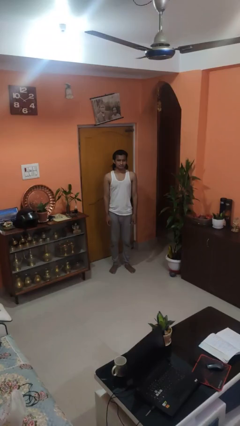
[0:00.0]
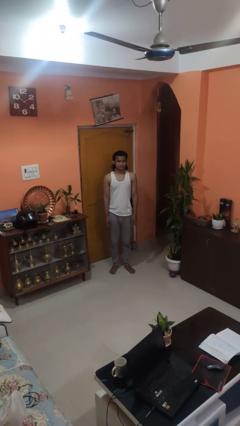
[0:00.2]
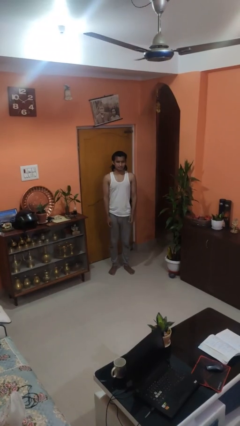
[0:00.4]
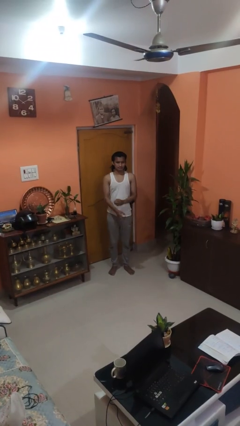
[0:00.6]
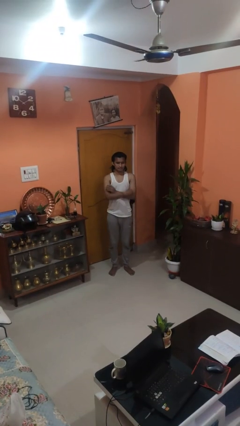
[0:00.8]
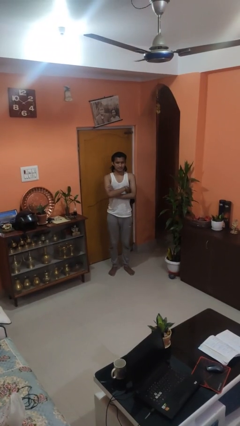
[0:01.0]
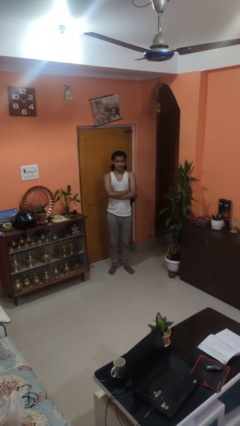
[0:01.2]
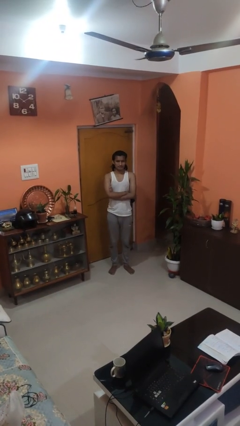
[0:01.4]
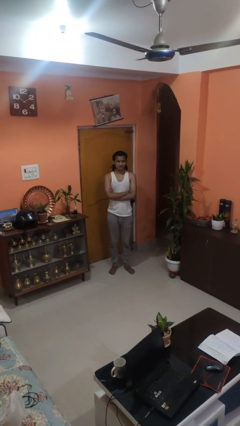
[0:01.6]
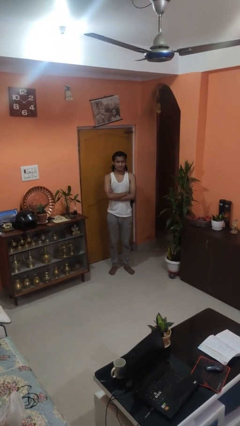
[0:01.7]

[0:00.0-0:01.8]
person crosses arms

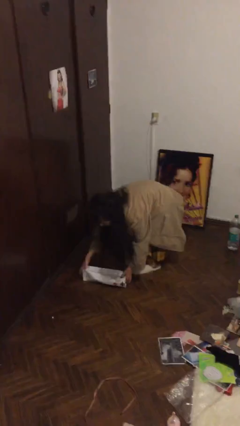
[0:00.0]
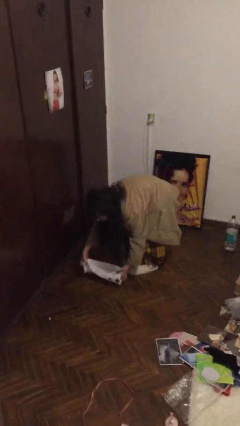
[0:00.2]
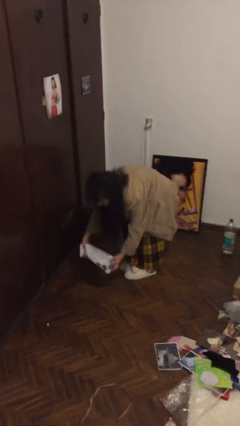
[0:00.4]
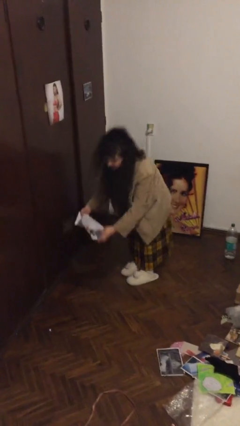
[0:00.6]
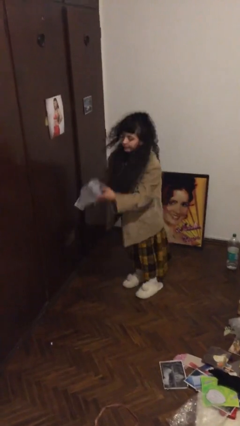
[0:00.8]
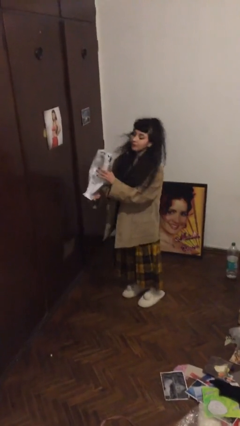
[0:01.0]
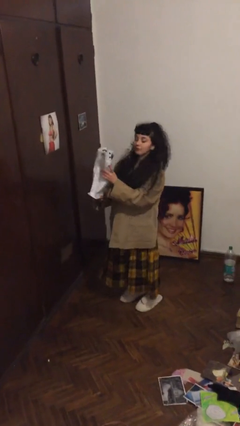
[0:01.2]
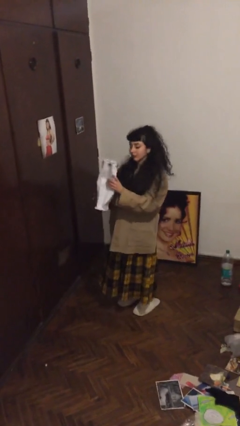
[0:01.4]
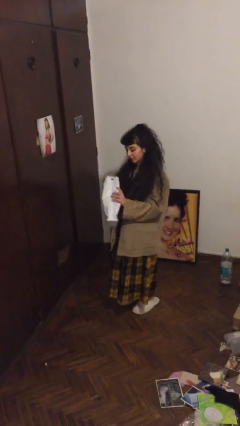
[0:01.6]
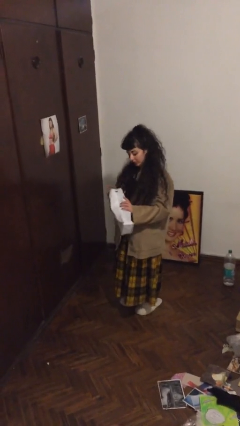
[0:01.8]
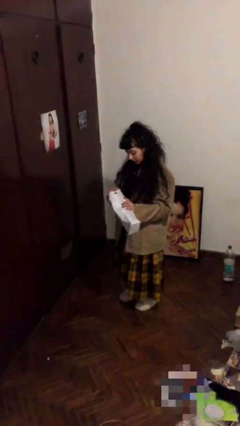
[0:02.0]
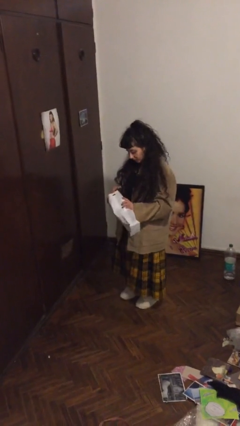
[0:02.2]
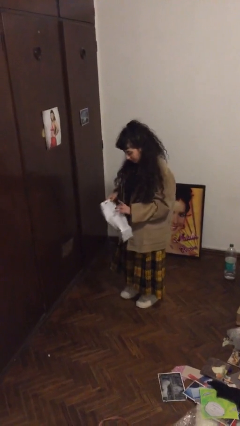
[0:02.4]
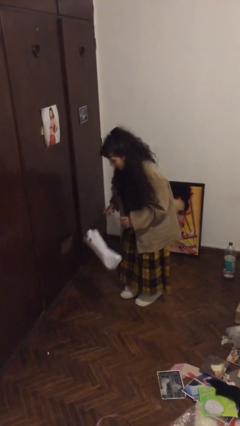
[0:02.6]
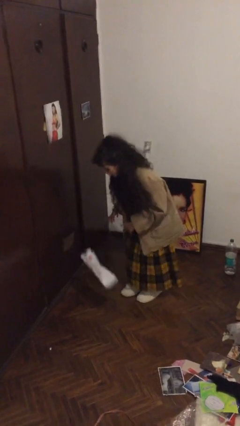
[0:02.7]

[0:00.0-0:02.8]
person picks up object from floor

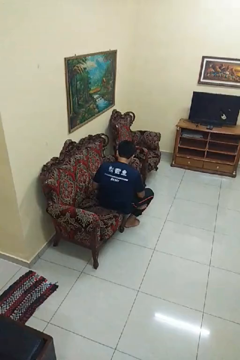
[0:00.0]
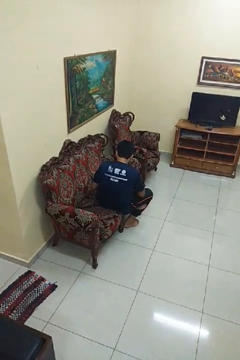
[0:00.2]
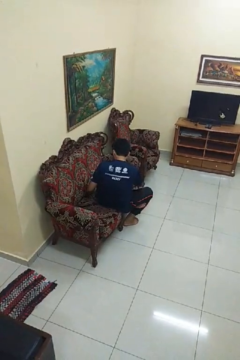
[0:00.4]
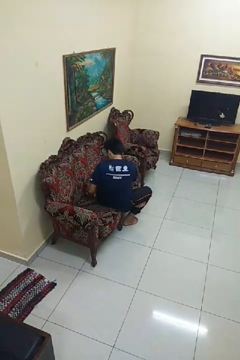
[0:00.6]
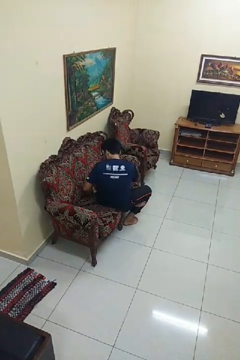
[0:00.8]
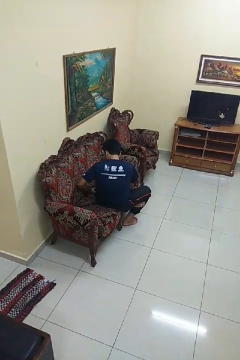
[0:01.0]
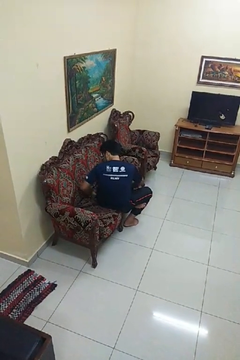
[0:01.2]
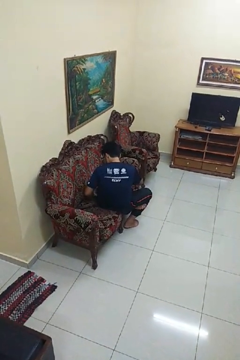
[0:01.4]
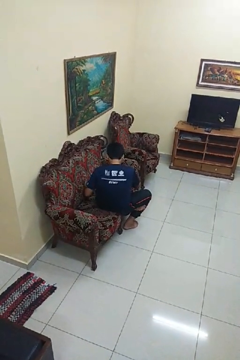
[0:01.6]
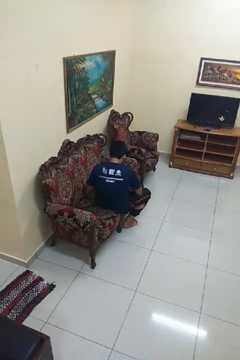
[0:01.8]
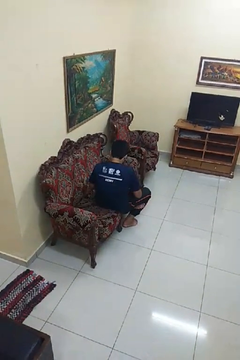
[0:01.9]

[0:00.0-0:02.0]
person searches in couch

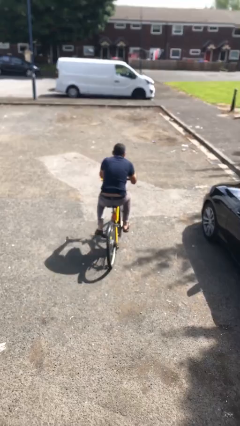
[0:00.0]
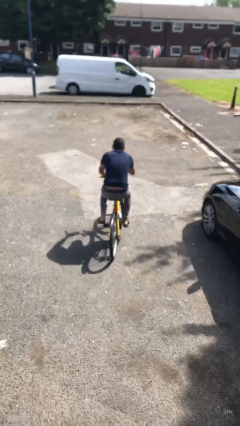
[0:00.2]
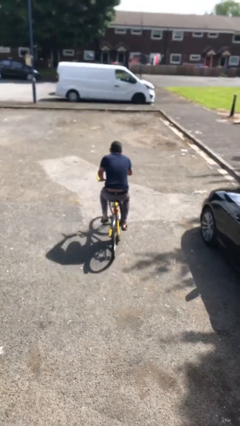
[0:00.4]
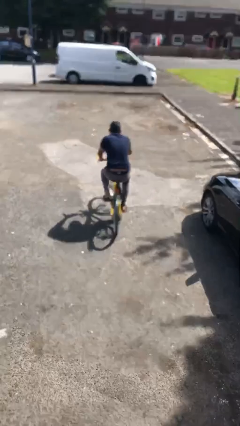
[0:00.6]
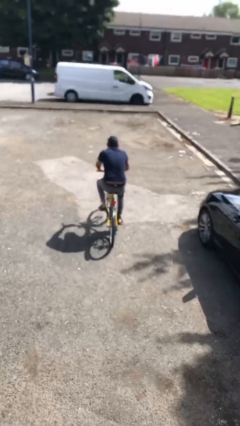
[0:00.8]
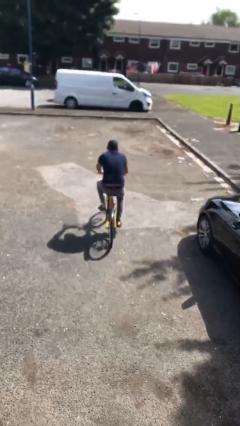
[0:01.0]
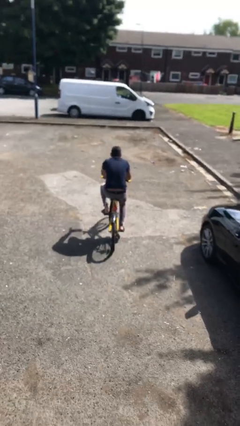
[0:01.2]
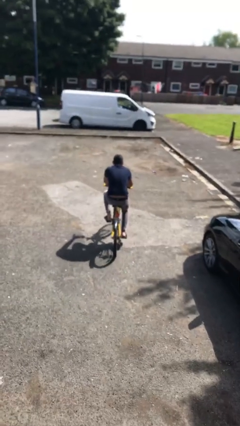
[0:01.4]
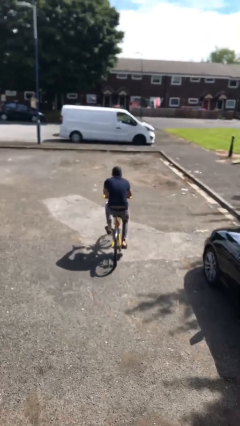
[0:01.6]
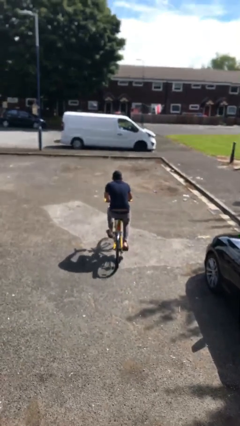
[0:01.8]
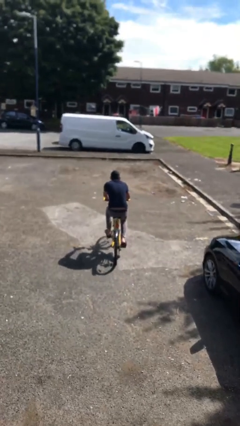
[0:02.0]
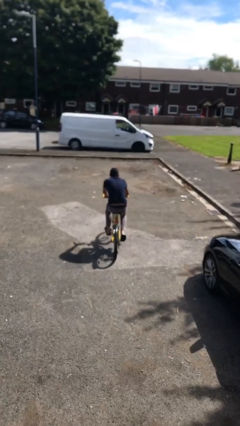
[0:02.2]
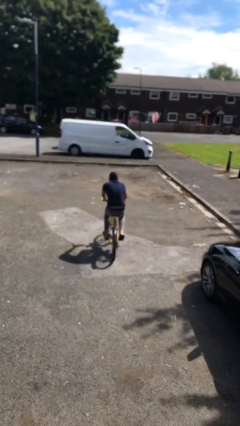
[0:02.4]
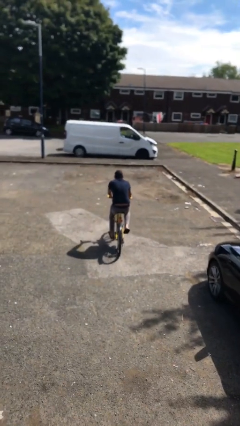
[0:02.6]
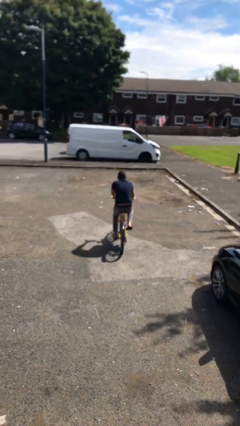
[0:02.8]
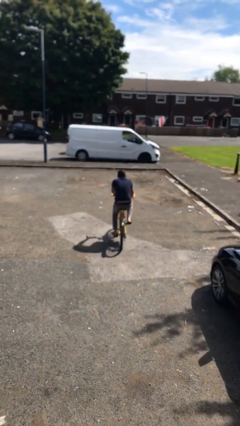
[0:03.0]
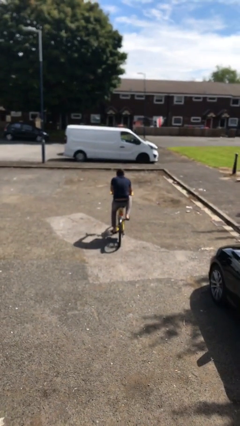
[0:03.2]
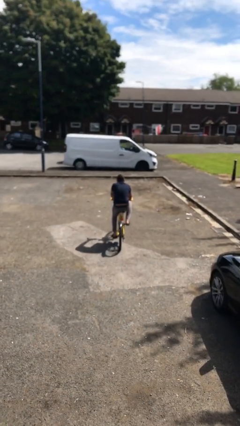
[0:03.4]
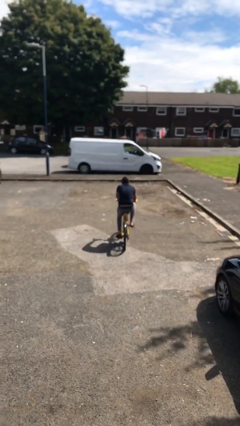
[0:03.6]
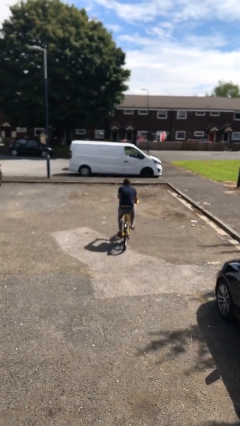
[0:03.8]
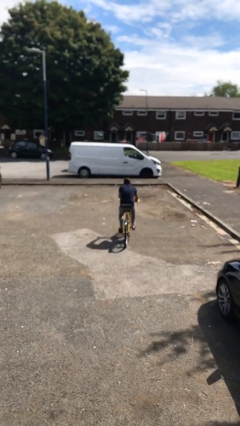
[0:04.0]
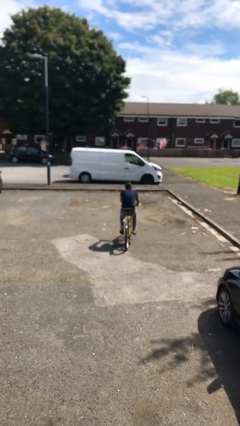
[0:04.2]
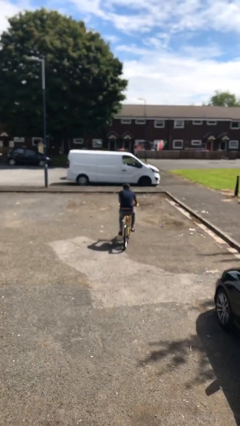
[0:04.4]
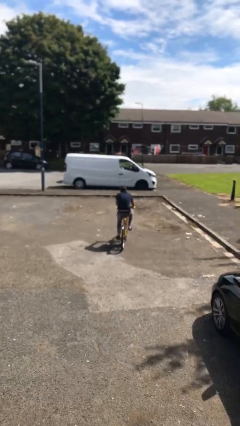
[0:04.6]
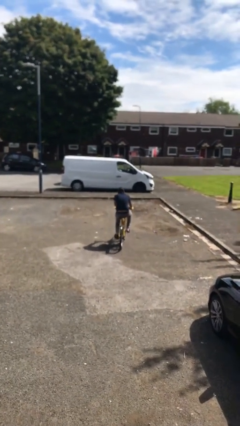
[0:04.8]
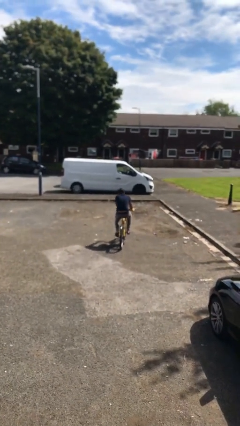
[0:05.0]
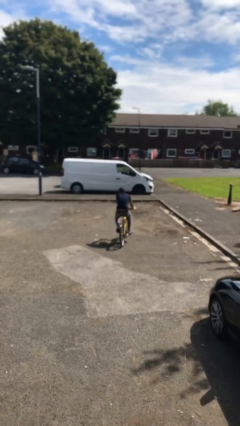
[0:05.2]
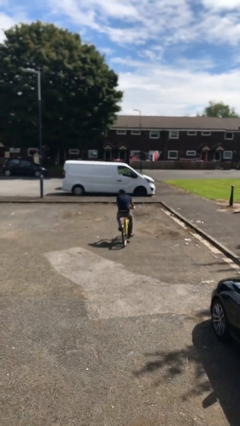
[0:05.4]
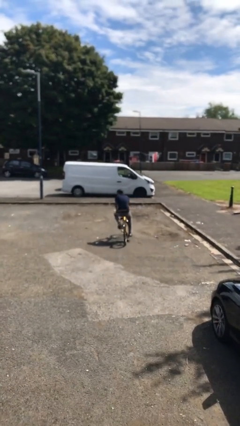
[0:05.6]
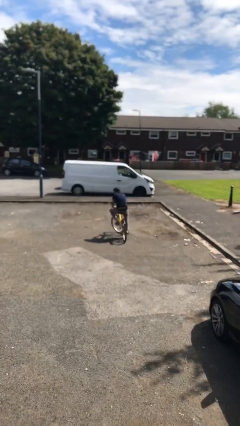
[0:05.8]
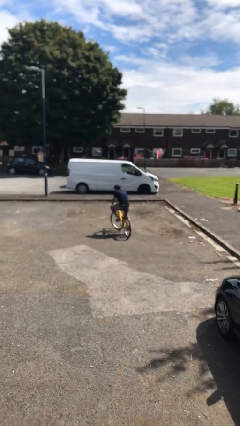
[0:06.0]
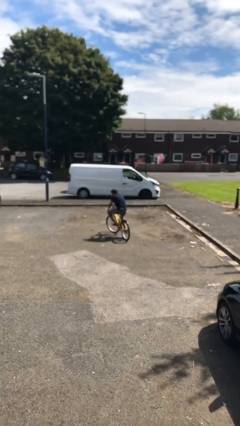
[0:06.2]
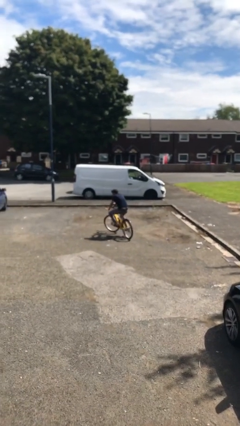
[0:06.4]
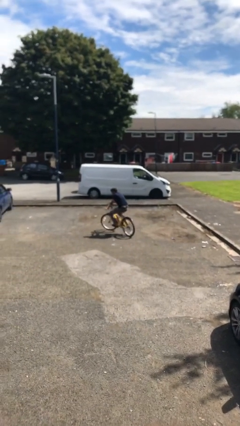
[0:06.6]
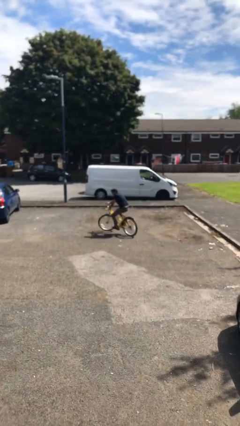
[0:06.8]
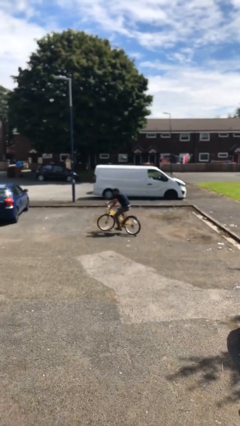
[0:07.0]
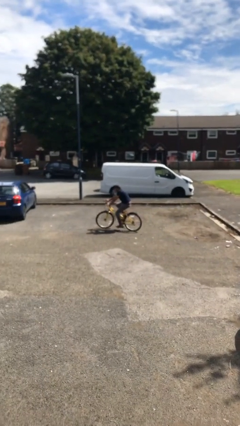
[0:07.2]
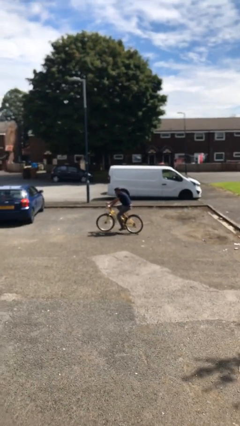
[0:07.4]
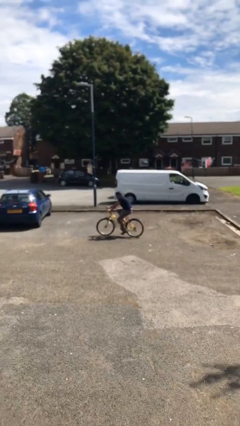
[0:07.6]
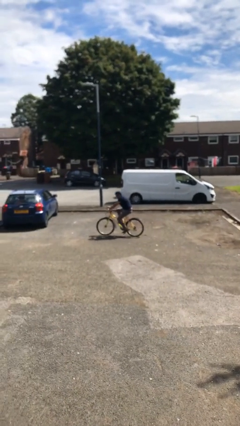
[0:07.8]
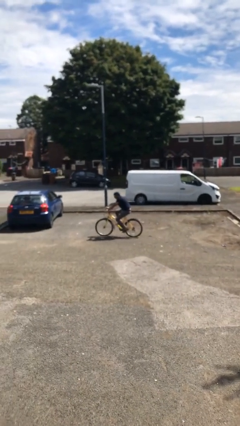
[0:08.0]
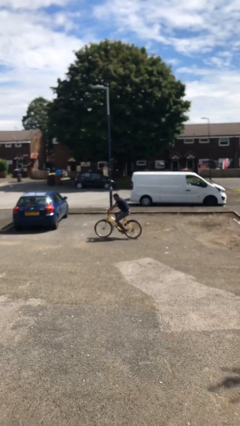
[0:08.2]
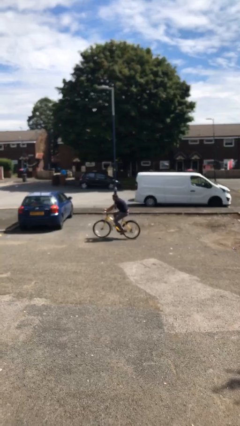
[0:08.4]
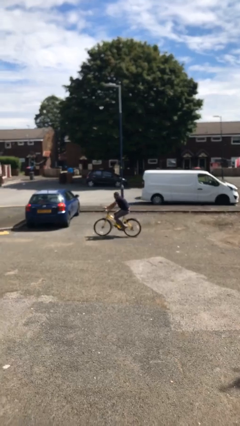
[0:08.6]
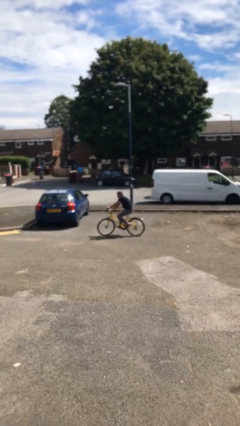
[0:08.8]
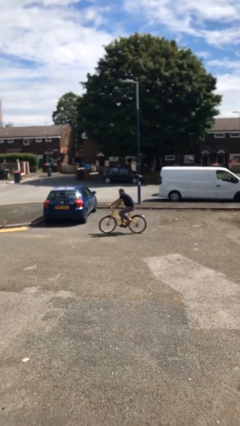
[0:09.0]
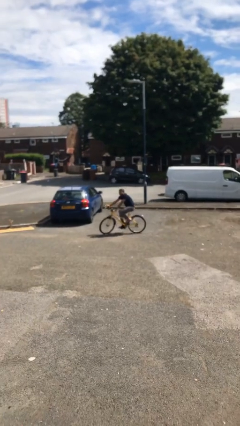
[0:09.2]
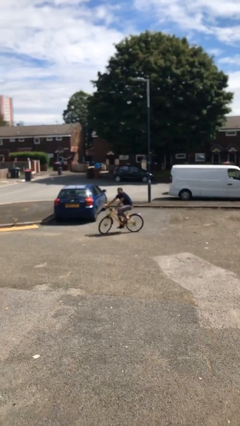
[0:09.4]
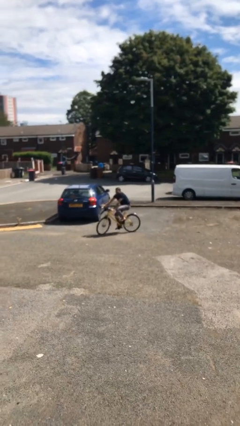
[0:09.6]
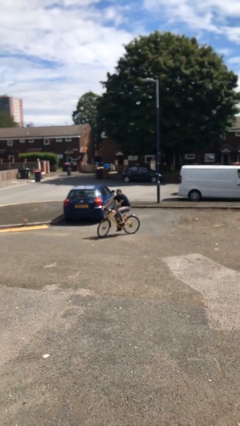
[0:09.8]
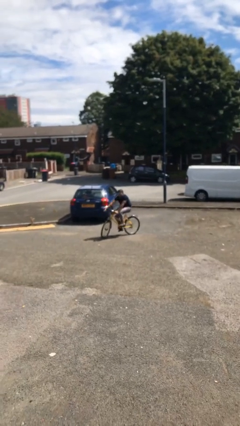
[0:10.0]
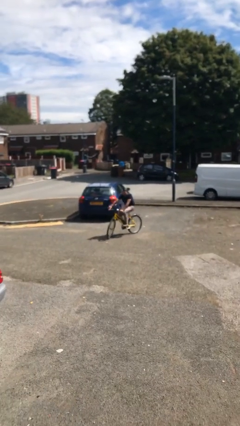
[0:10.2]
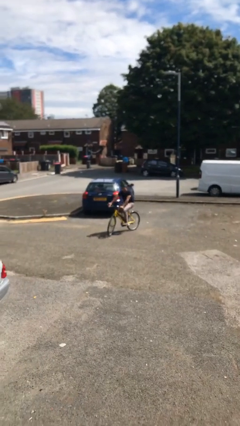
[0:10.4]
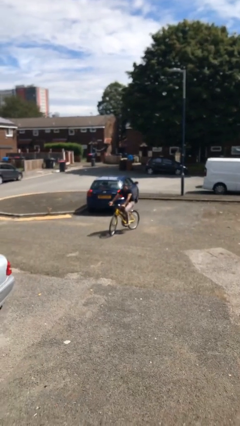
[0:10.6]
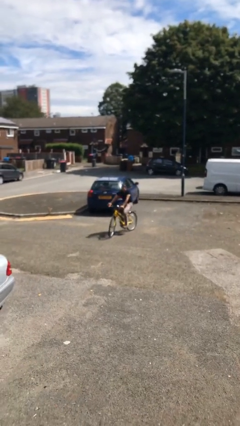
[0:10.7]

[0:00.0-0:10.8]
person rides bicycle

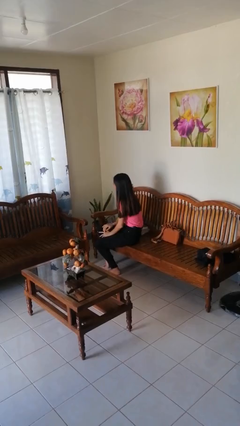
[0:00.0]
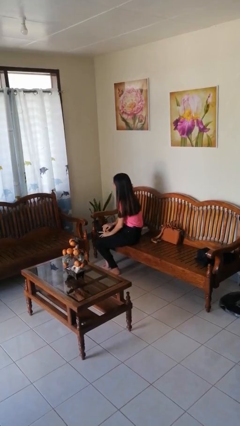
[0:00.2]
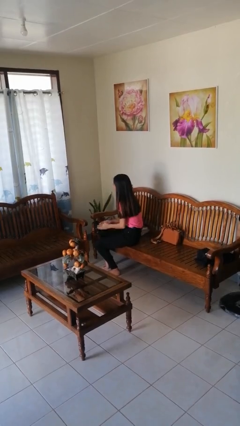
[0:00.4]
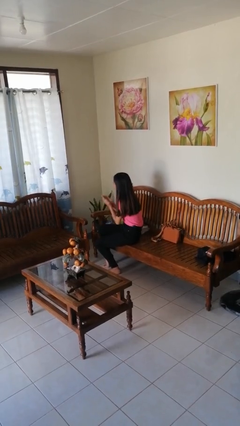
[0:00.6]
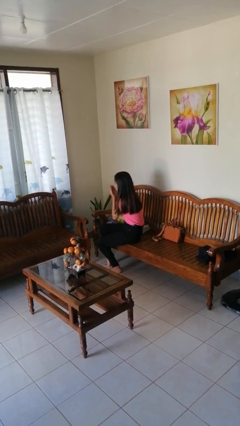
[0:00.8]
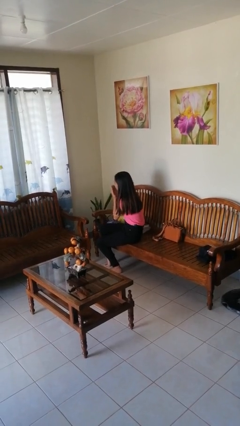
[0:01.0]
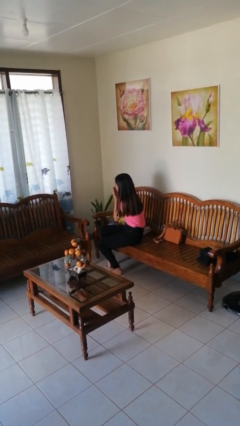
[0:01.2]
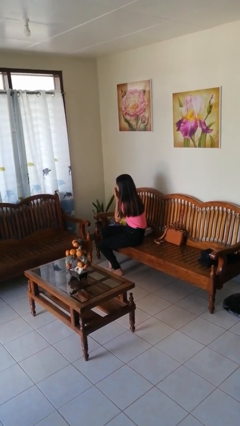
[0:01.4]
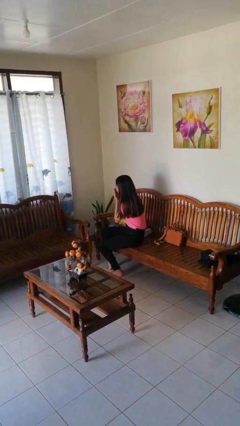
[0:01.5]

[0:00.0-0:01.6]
person blows into hands
